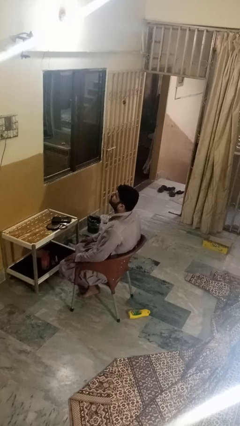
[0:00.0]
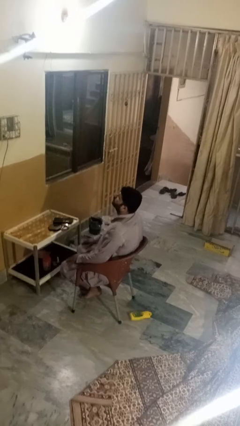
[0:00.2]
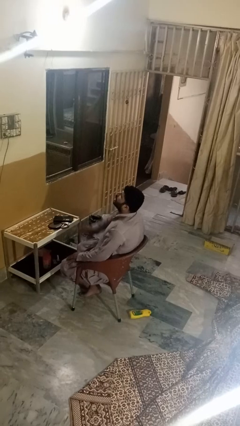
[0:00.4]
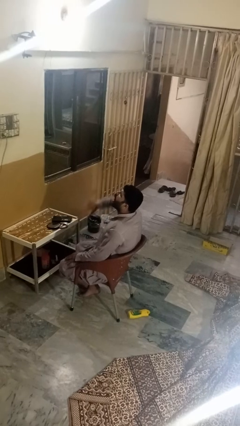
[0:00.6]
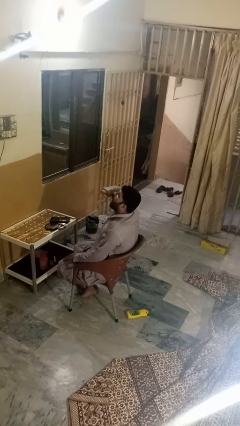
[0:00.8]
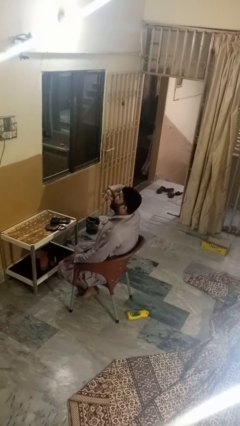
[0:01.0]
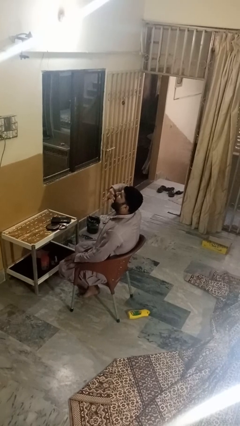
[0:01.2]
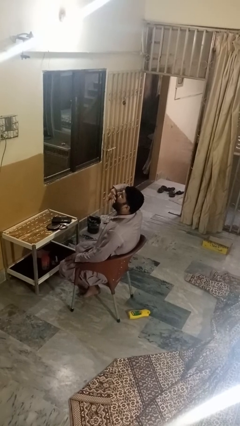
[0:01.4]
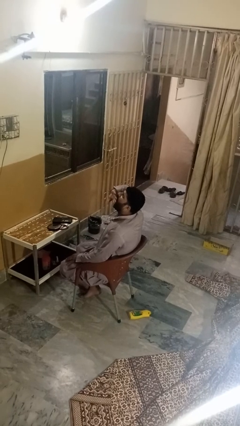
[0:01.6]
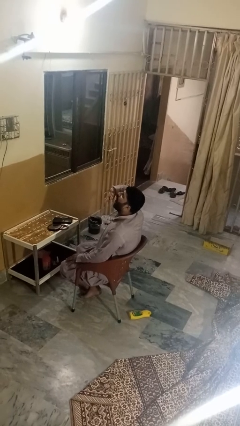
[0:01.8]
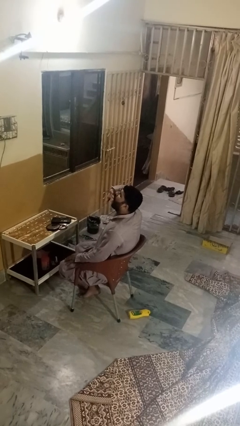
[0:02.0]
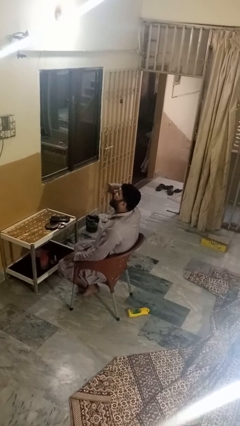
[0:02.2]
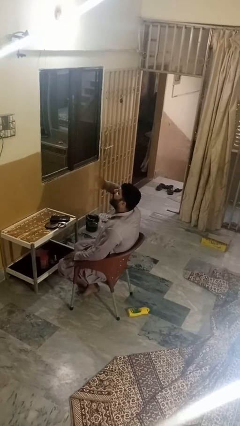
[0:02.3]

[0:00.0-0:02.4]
person yawns

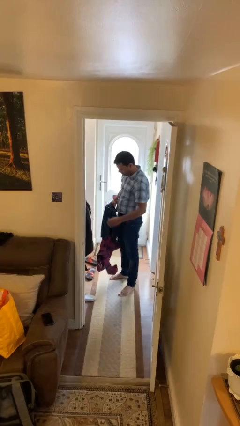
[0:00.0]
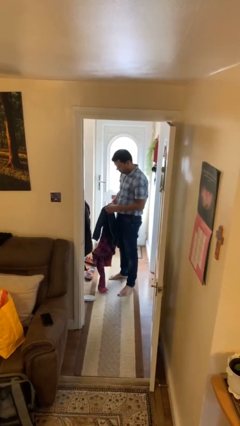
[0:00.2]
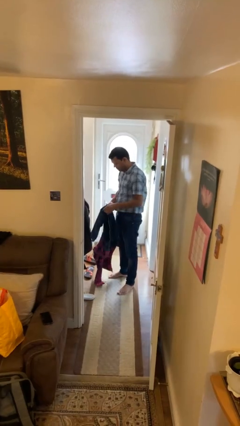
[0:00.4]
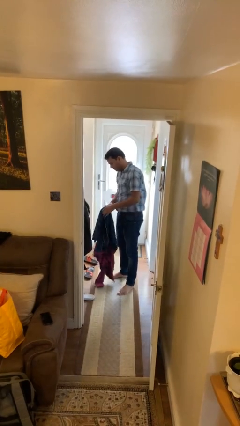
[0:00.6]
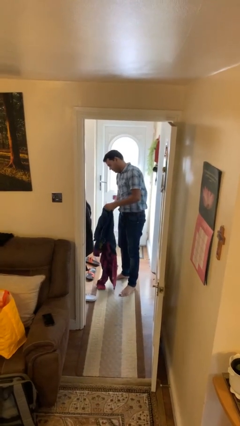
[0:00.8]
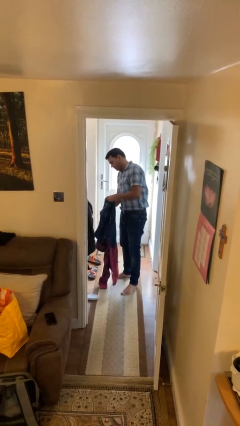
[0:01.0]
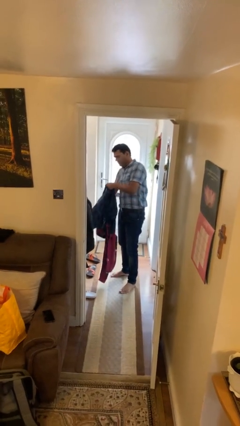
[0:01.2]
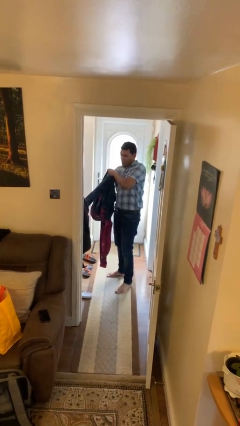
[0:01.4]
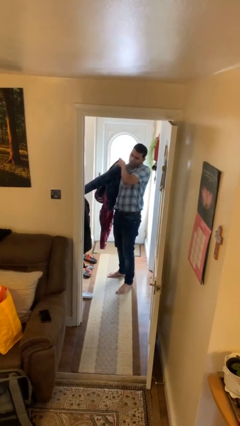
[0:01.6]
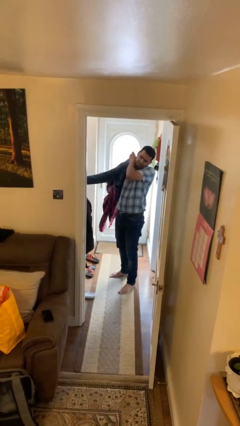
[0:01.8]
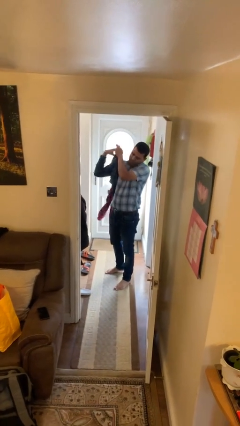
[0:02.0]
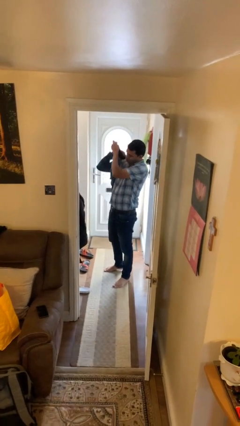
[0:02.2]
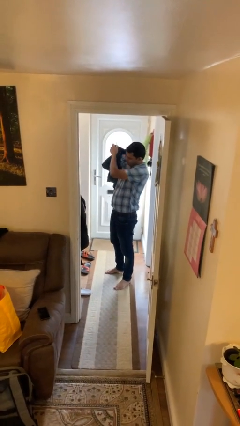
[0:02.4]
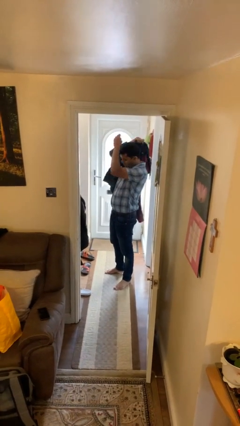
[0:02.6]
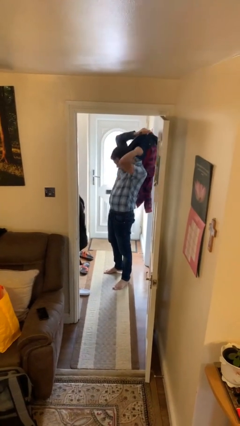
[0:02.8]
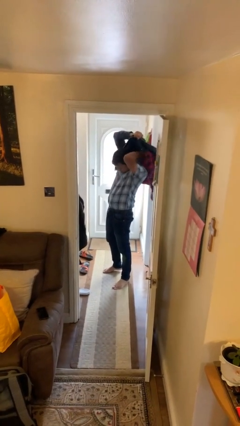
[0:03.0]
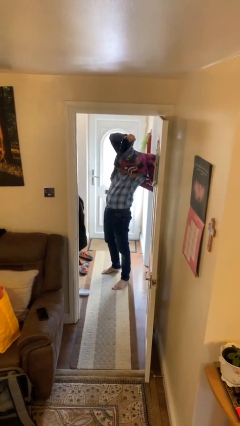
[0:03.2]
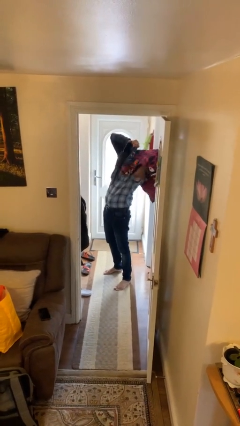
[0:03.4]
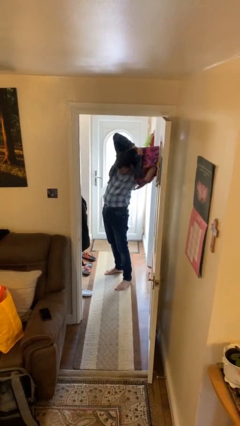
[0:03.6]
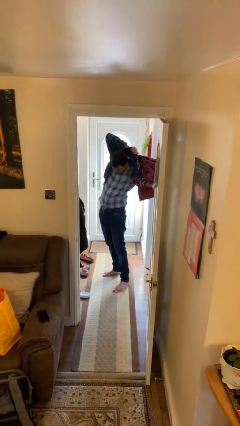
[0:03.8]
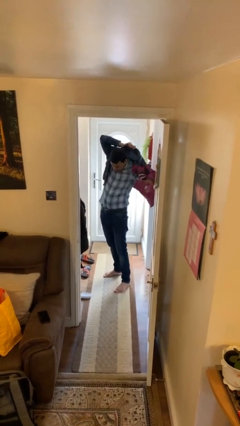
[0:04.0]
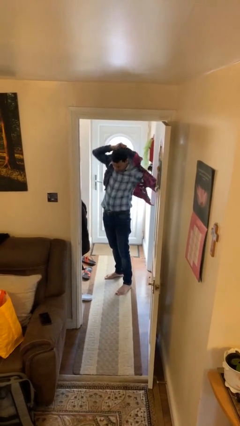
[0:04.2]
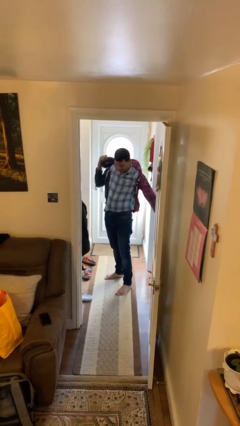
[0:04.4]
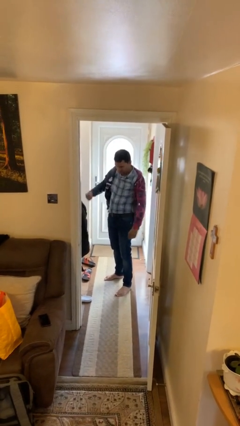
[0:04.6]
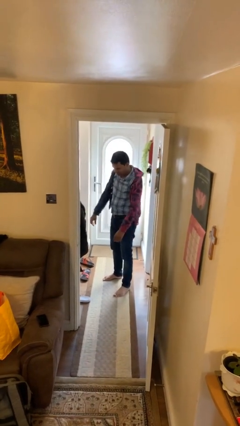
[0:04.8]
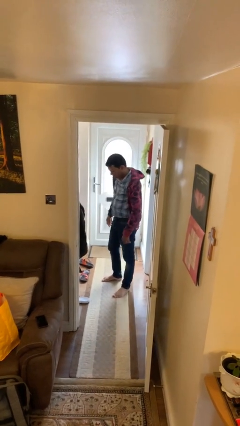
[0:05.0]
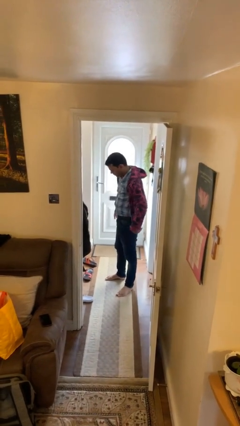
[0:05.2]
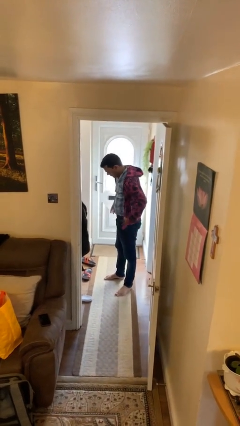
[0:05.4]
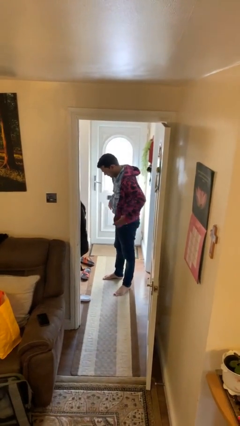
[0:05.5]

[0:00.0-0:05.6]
person puts on hoodie

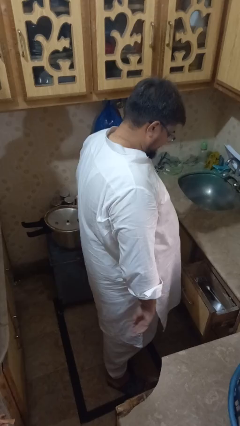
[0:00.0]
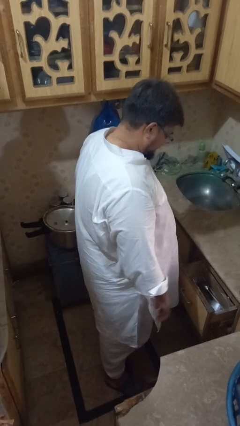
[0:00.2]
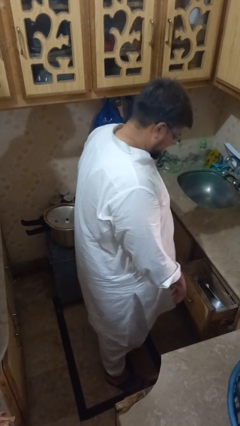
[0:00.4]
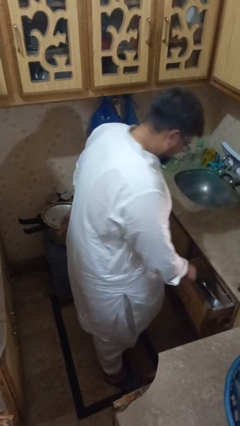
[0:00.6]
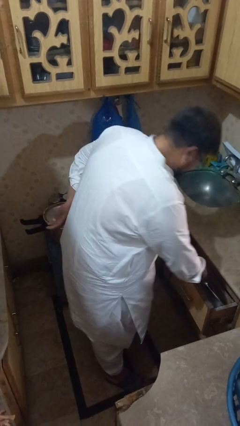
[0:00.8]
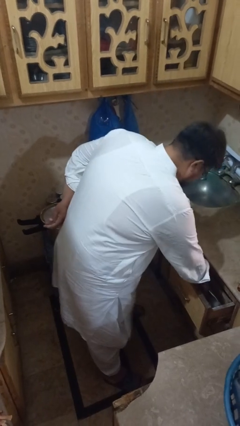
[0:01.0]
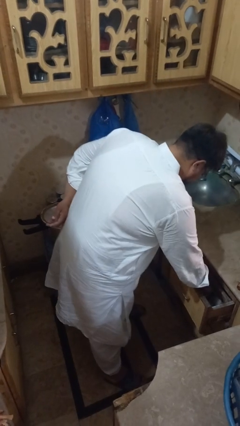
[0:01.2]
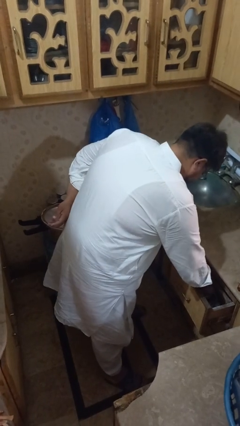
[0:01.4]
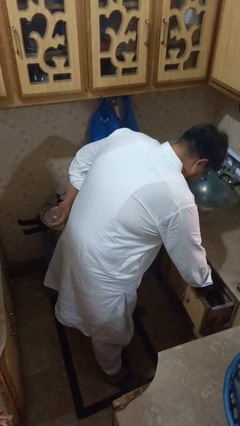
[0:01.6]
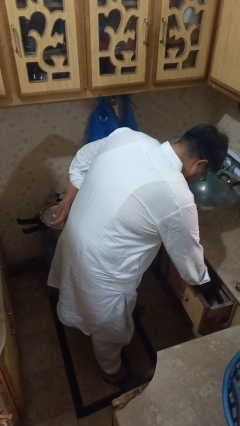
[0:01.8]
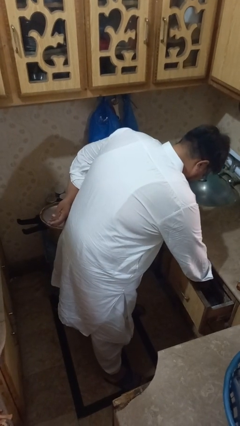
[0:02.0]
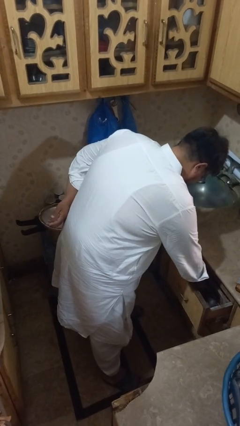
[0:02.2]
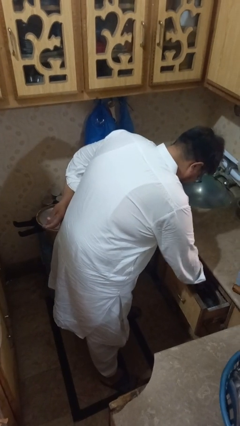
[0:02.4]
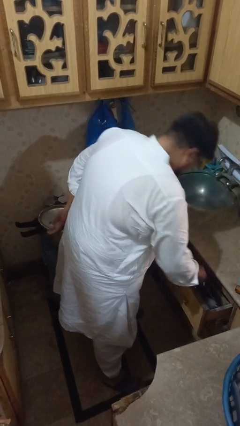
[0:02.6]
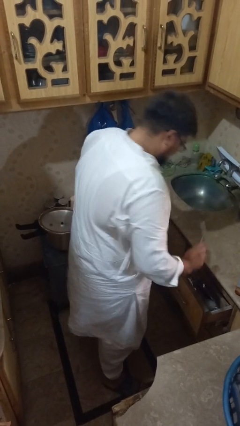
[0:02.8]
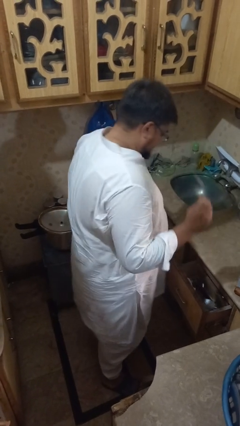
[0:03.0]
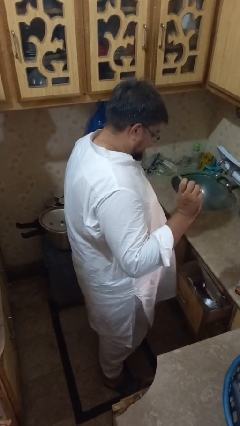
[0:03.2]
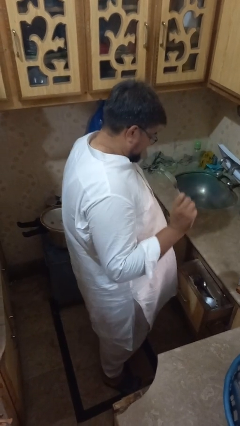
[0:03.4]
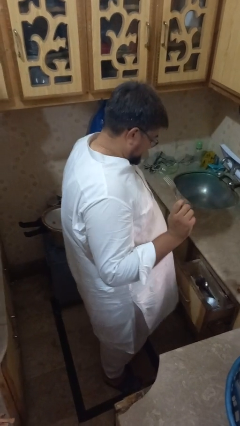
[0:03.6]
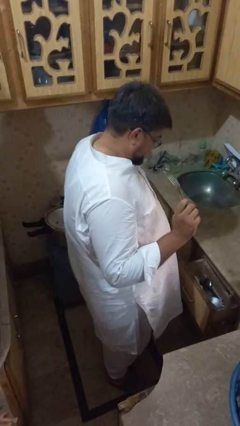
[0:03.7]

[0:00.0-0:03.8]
person searches in kitchen drawer

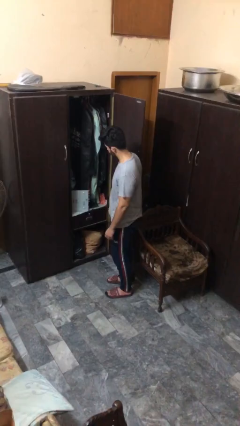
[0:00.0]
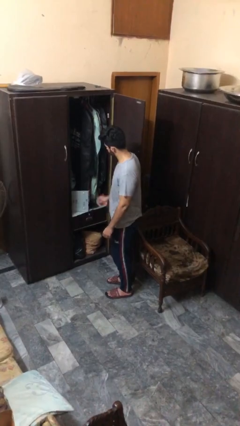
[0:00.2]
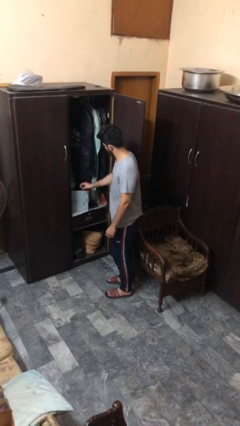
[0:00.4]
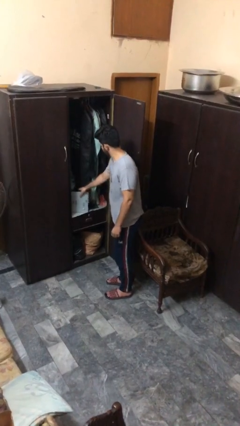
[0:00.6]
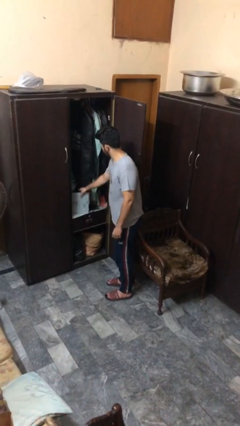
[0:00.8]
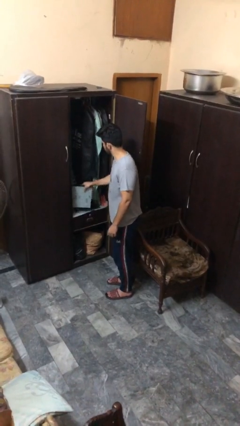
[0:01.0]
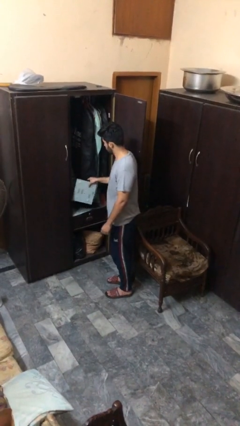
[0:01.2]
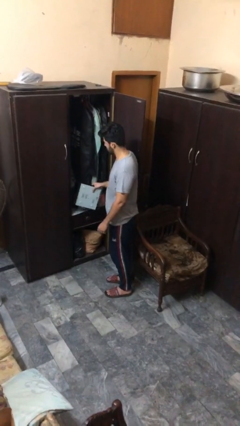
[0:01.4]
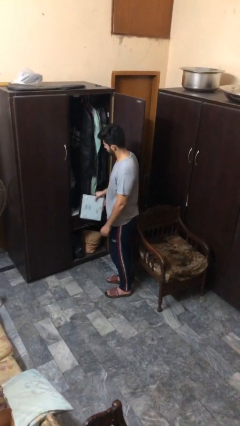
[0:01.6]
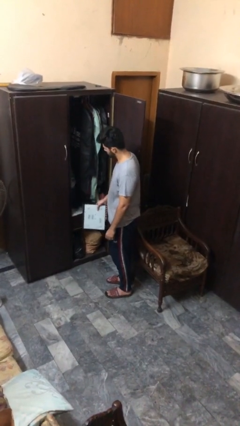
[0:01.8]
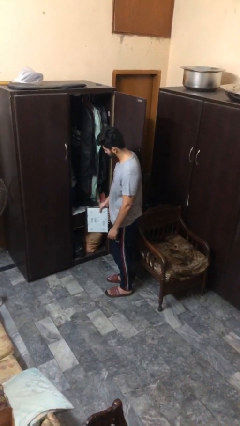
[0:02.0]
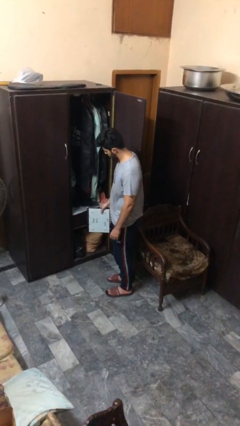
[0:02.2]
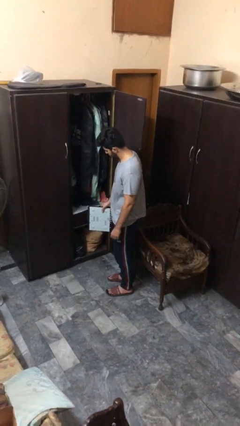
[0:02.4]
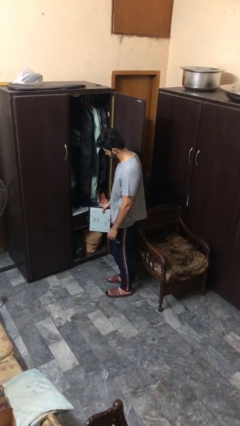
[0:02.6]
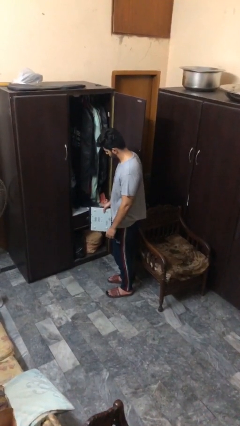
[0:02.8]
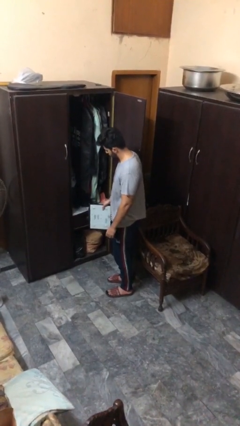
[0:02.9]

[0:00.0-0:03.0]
person picks up object from countertop

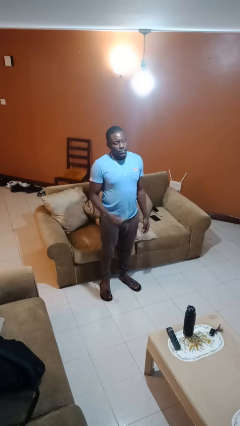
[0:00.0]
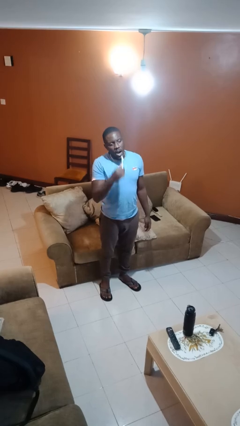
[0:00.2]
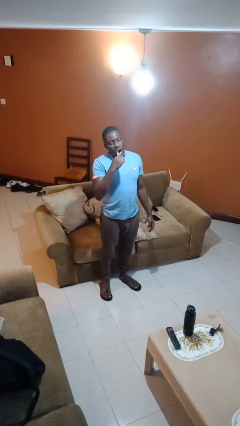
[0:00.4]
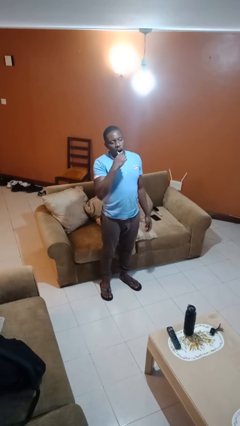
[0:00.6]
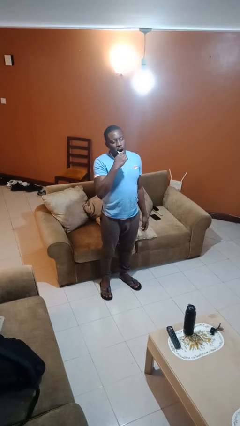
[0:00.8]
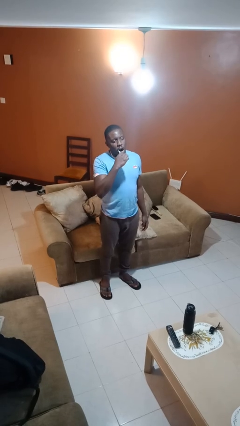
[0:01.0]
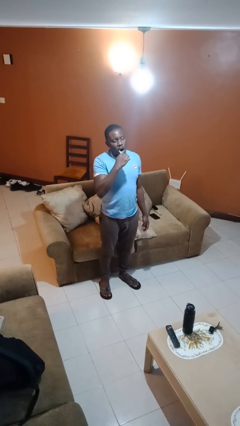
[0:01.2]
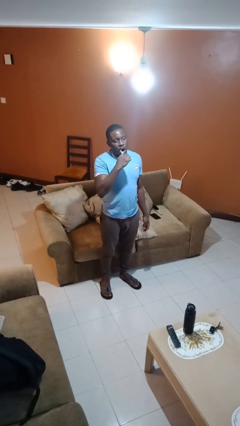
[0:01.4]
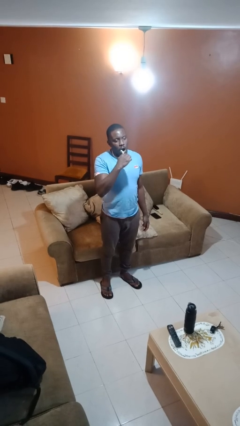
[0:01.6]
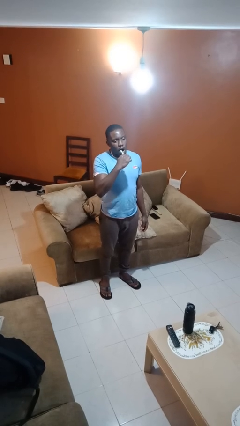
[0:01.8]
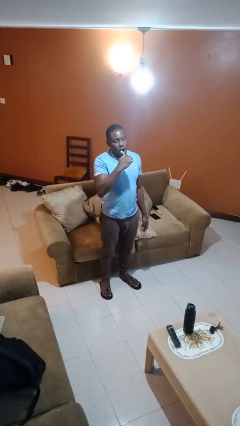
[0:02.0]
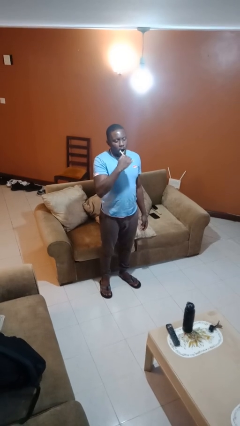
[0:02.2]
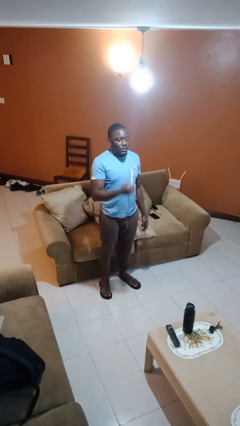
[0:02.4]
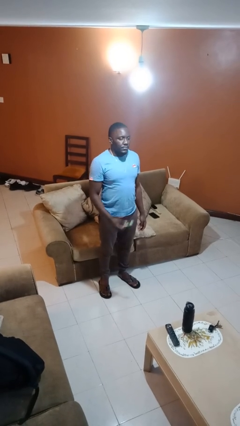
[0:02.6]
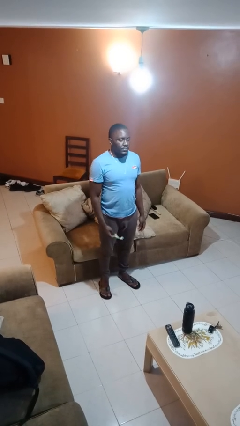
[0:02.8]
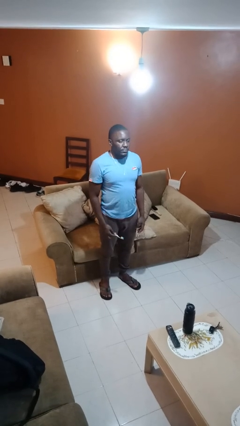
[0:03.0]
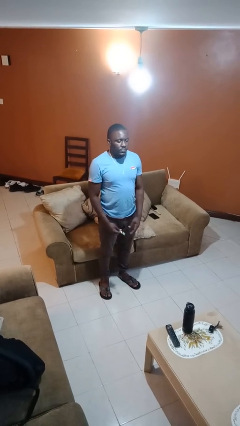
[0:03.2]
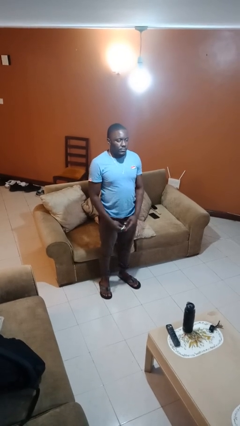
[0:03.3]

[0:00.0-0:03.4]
person brushes teeth
